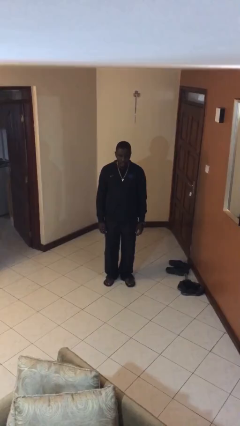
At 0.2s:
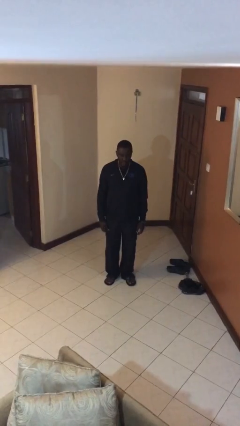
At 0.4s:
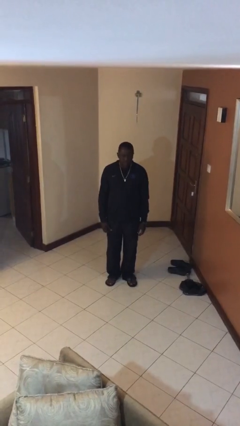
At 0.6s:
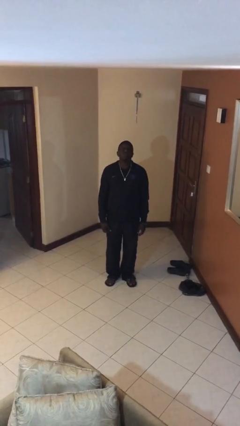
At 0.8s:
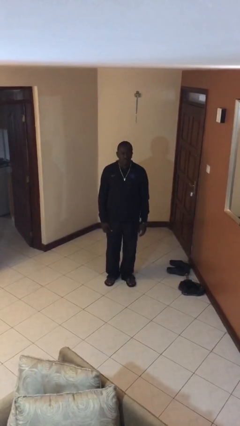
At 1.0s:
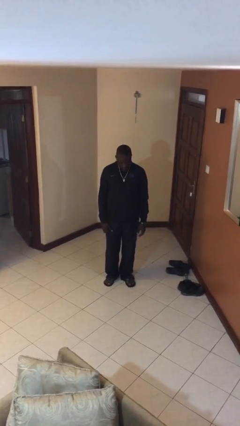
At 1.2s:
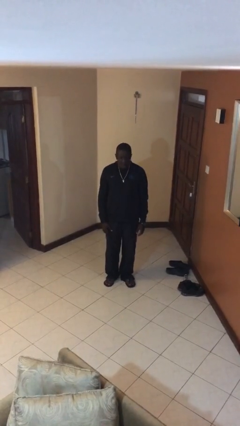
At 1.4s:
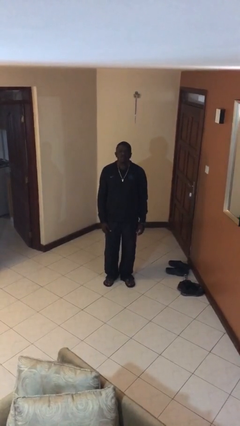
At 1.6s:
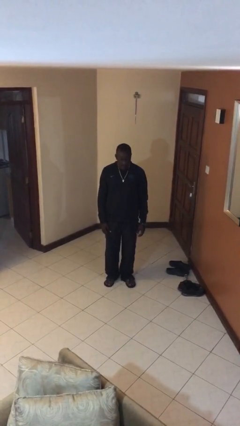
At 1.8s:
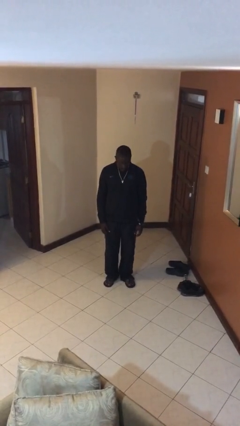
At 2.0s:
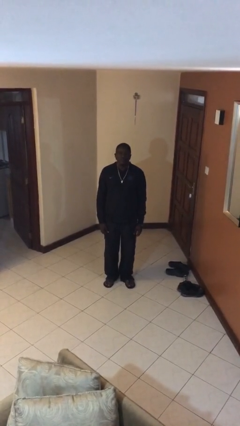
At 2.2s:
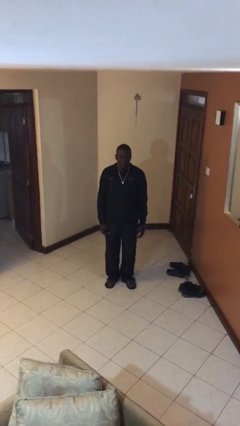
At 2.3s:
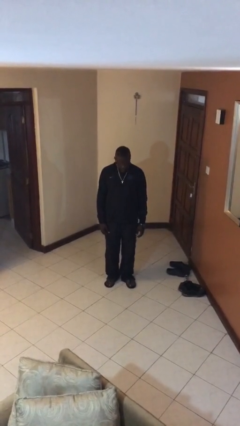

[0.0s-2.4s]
person nods head

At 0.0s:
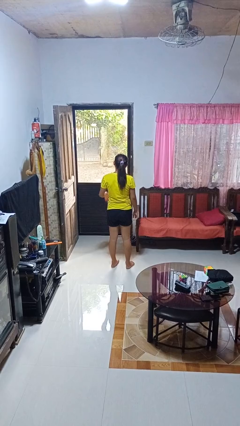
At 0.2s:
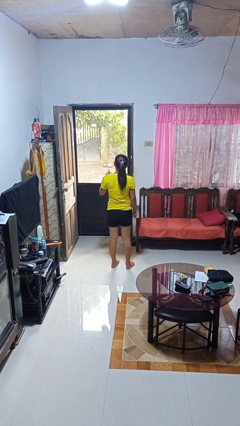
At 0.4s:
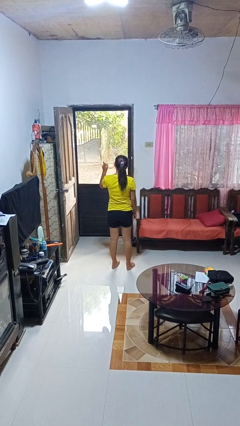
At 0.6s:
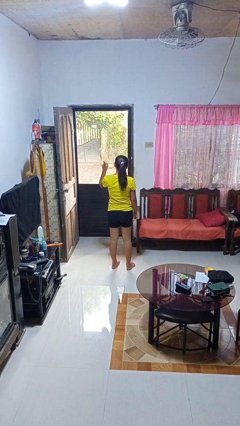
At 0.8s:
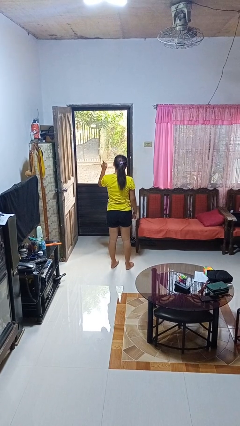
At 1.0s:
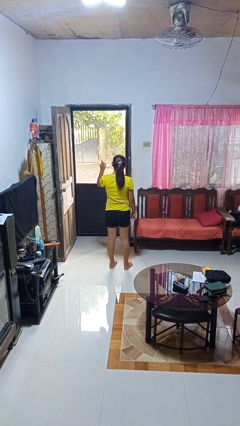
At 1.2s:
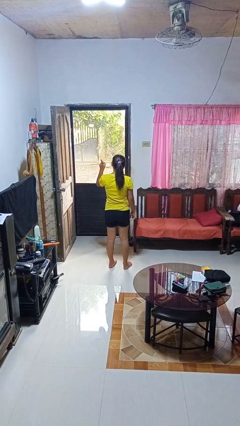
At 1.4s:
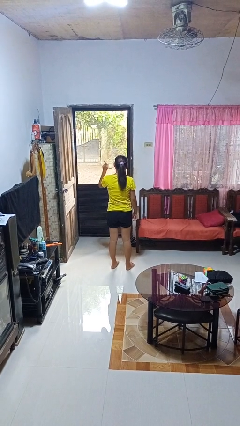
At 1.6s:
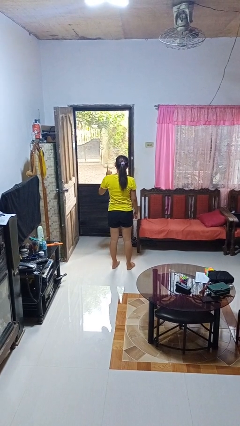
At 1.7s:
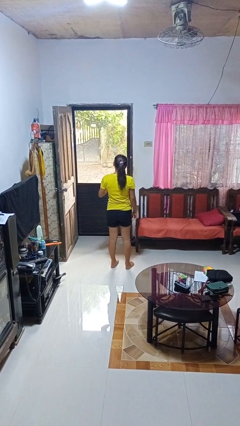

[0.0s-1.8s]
person gestures number one

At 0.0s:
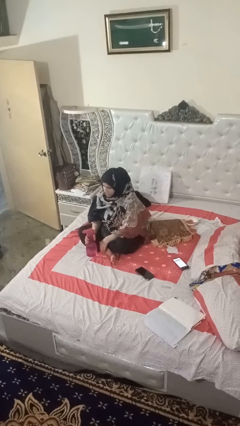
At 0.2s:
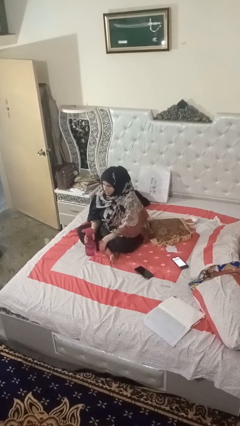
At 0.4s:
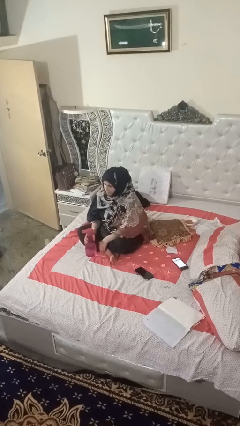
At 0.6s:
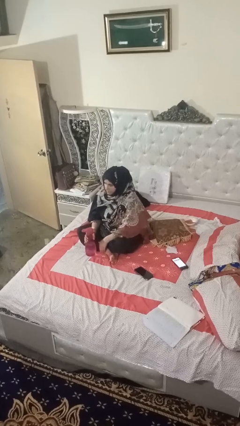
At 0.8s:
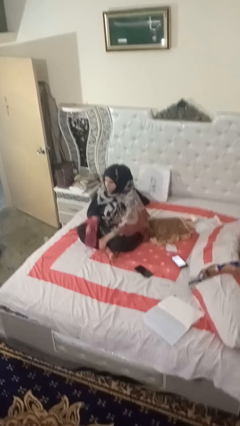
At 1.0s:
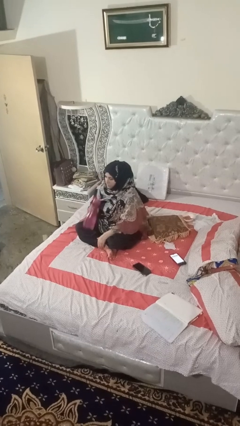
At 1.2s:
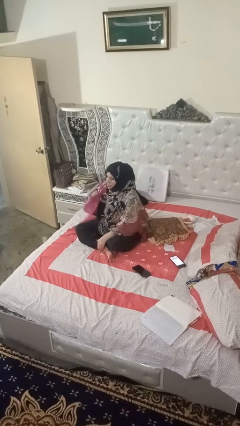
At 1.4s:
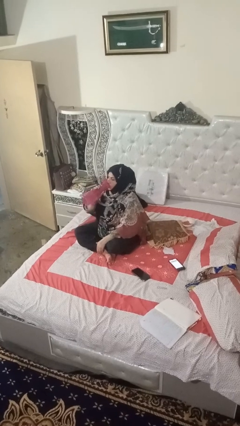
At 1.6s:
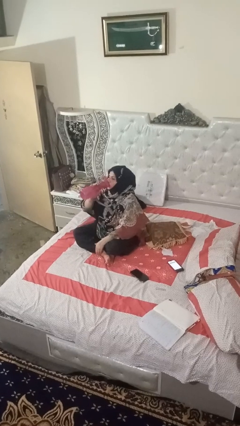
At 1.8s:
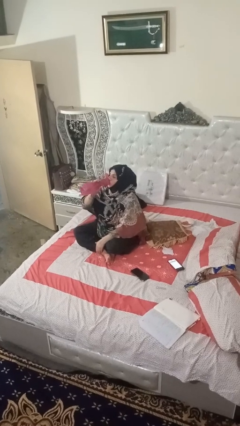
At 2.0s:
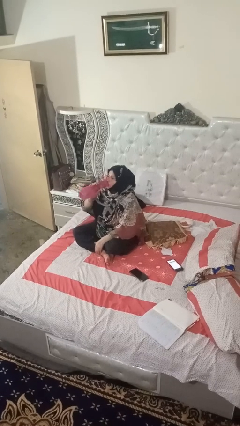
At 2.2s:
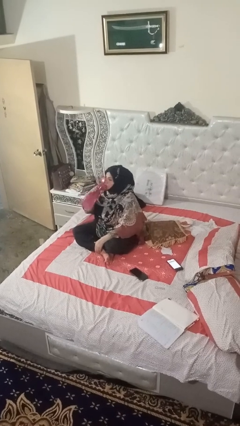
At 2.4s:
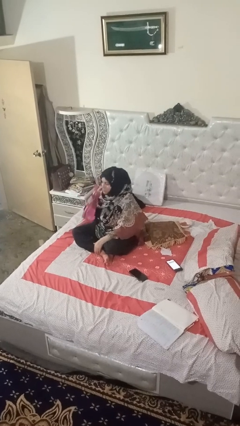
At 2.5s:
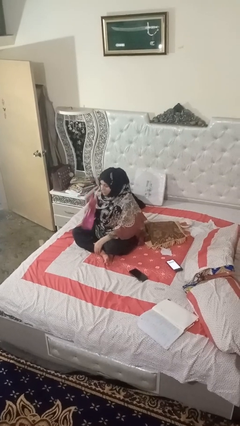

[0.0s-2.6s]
person drinks from bottle

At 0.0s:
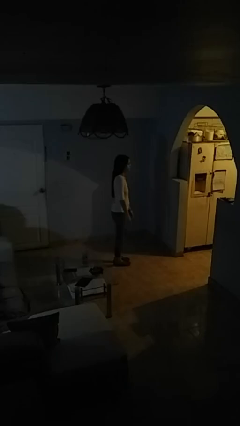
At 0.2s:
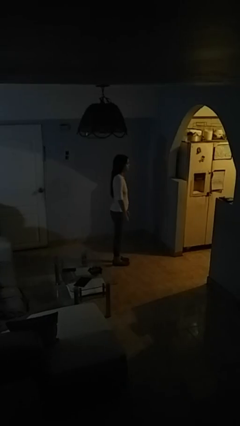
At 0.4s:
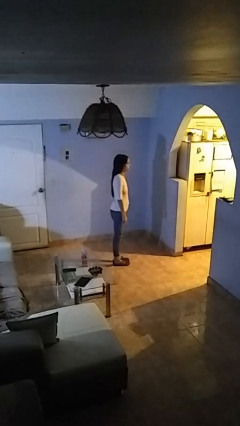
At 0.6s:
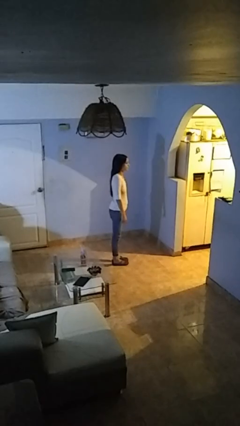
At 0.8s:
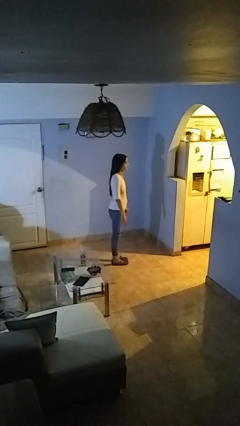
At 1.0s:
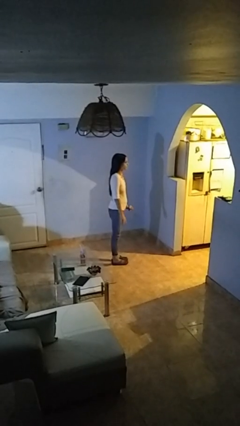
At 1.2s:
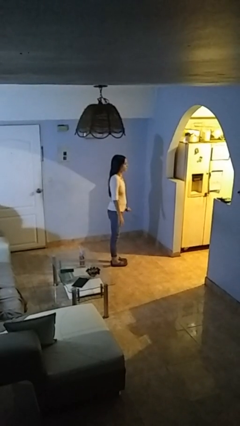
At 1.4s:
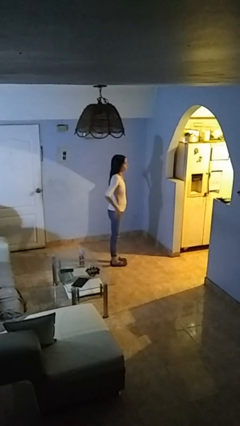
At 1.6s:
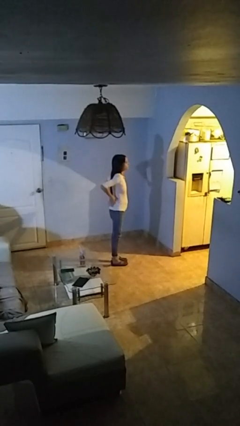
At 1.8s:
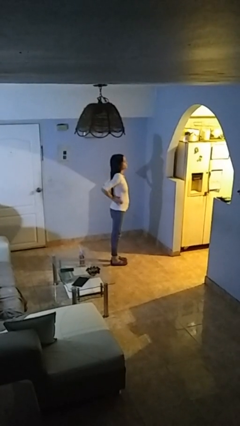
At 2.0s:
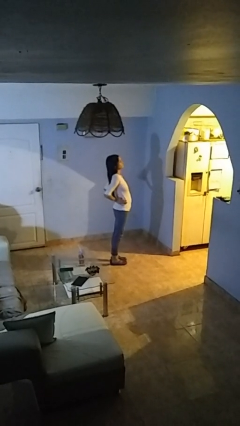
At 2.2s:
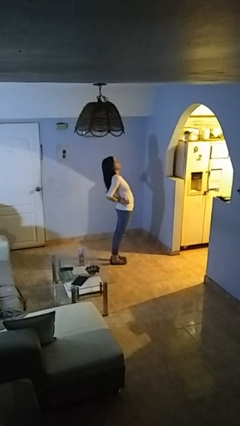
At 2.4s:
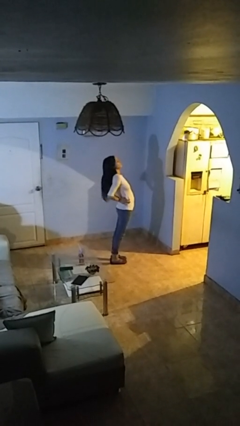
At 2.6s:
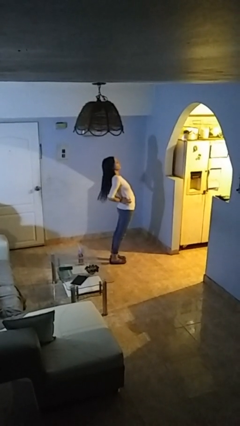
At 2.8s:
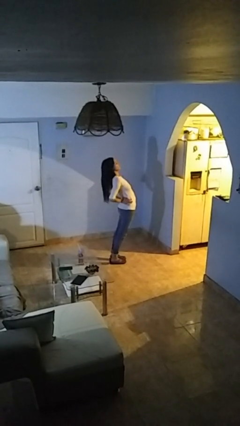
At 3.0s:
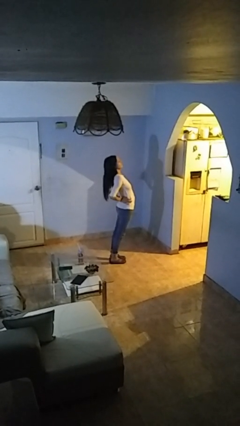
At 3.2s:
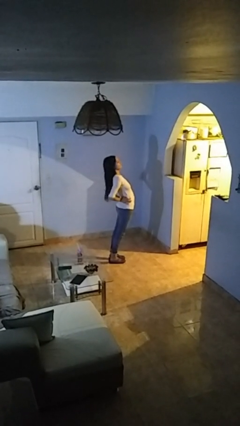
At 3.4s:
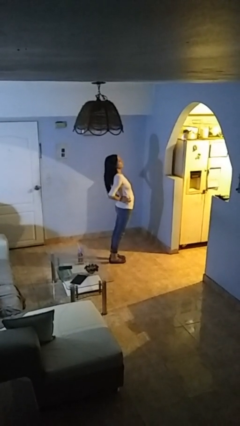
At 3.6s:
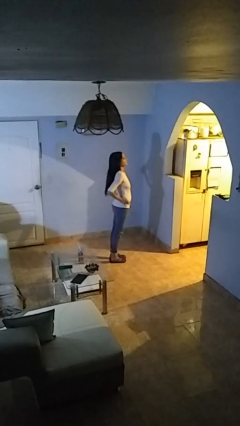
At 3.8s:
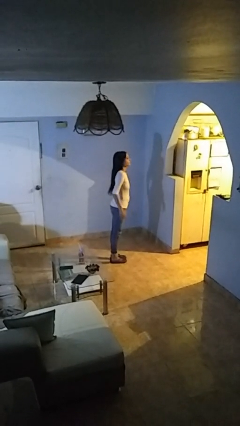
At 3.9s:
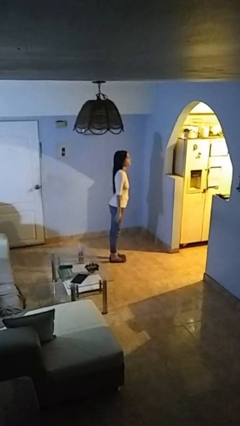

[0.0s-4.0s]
person stretches back

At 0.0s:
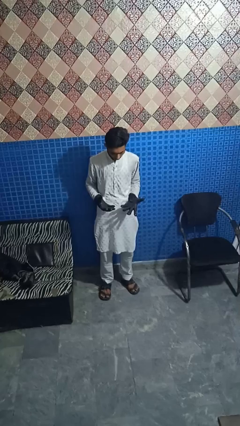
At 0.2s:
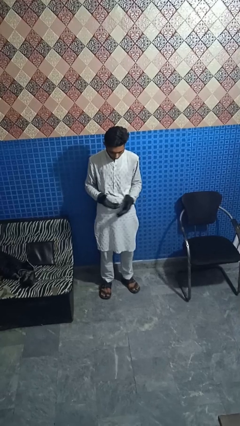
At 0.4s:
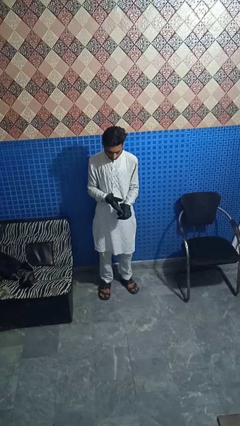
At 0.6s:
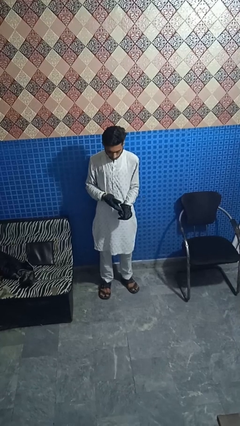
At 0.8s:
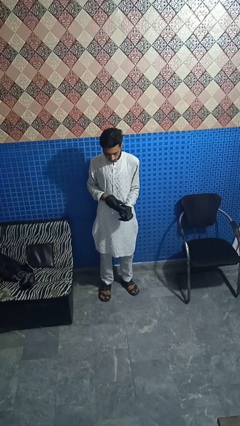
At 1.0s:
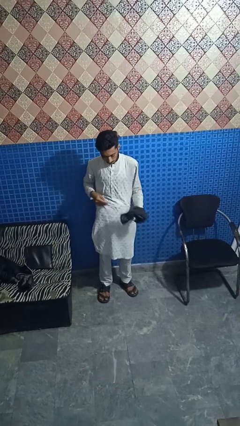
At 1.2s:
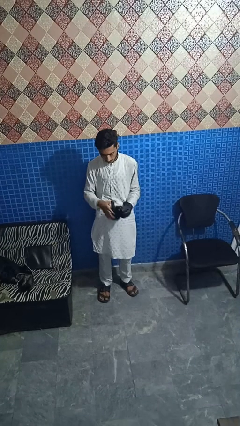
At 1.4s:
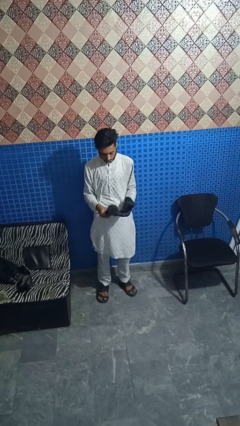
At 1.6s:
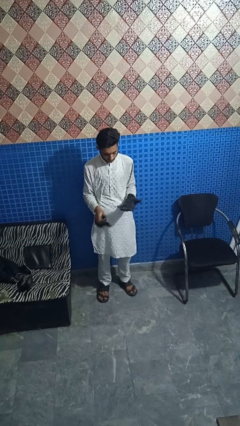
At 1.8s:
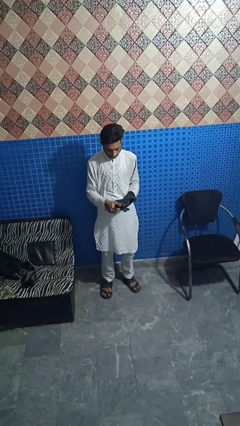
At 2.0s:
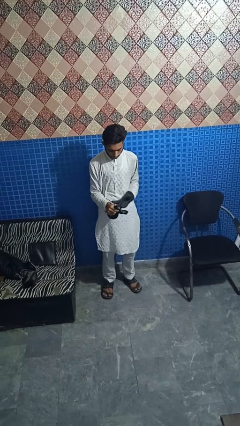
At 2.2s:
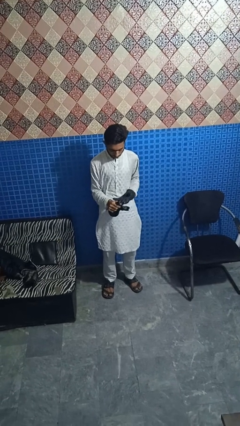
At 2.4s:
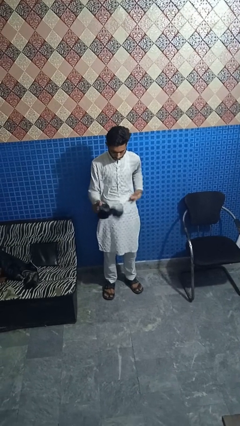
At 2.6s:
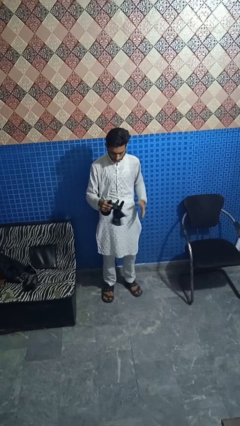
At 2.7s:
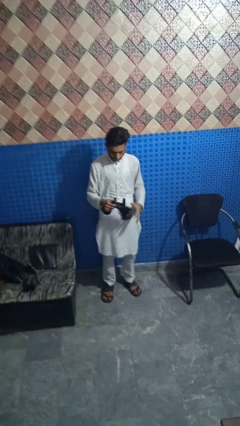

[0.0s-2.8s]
person takes off gloves

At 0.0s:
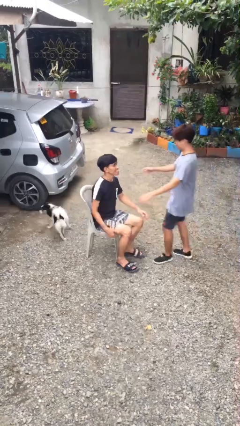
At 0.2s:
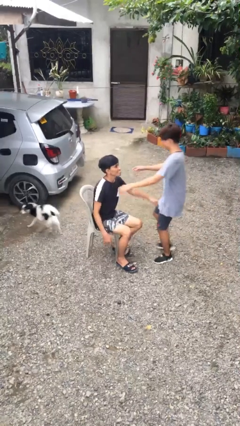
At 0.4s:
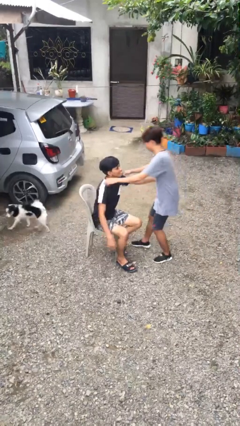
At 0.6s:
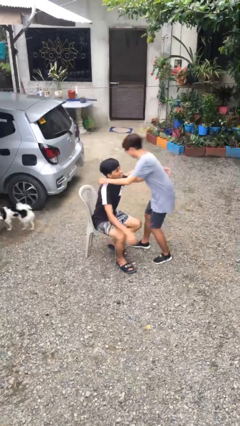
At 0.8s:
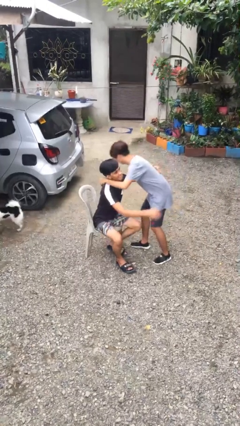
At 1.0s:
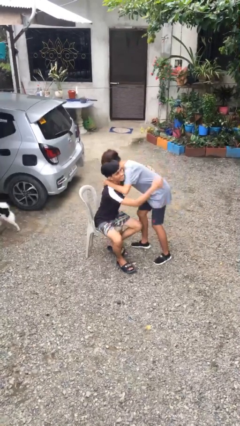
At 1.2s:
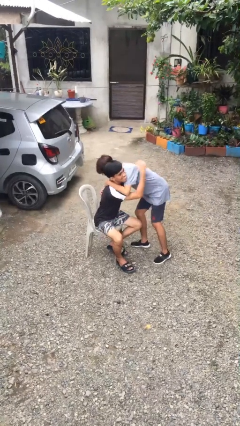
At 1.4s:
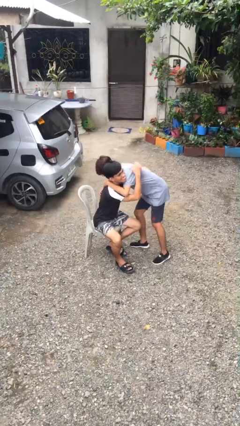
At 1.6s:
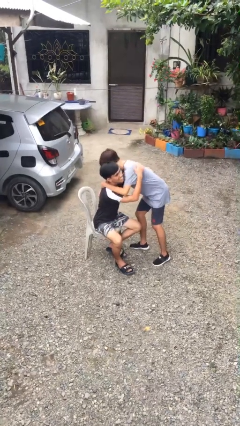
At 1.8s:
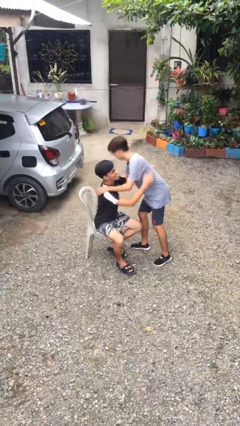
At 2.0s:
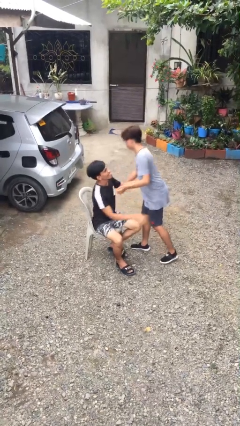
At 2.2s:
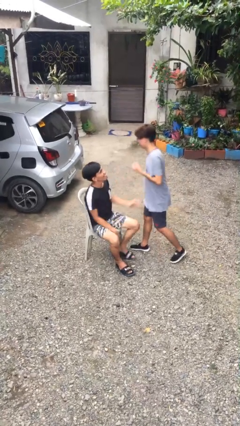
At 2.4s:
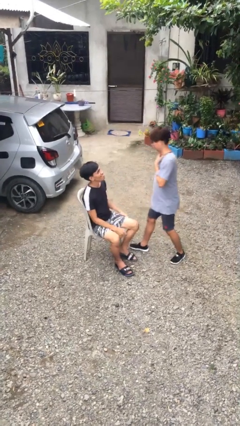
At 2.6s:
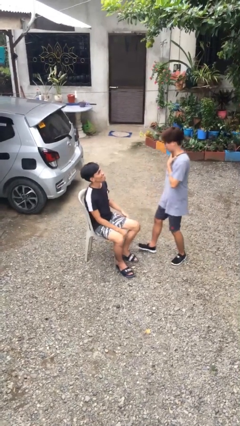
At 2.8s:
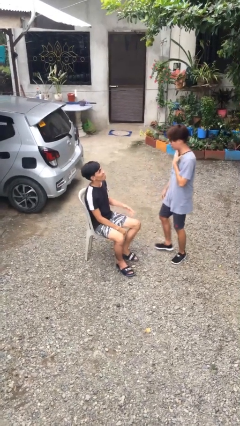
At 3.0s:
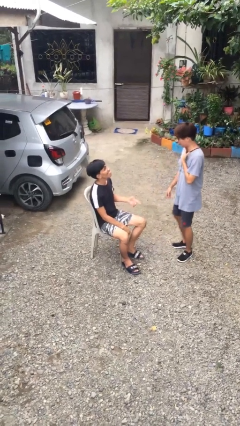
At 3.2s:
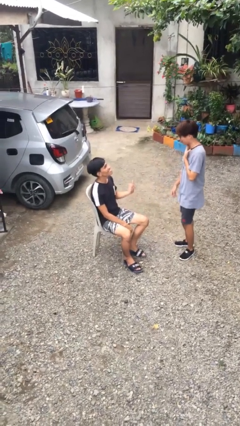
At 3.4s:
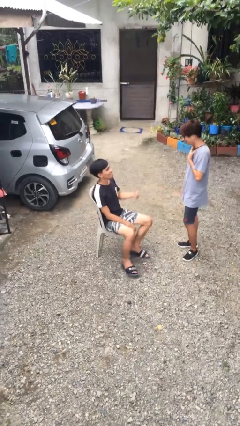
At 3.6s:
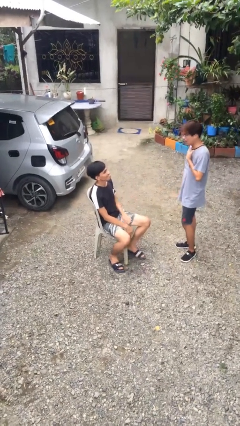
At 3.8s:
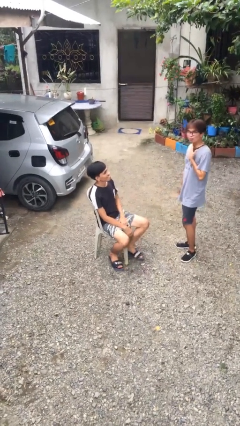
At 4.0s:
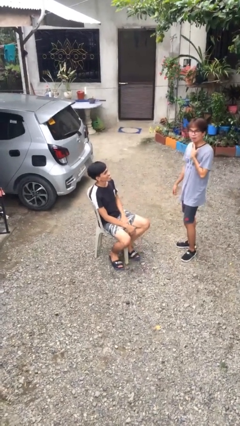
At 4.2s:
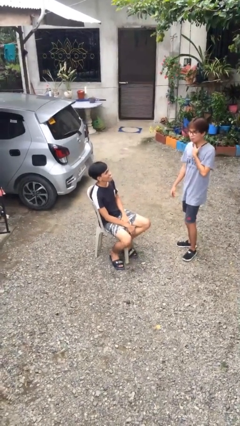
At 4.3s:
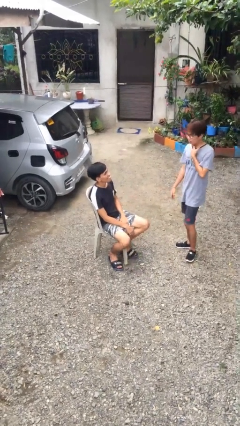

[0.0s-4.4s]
person embraces person
